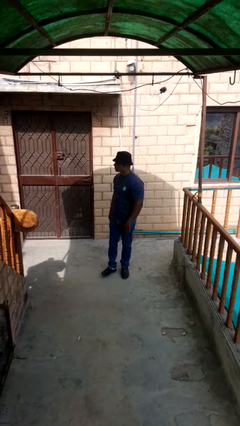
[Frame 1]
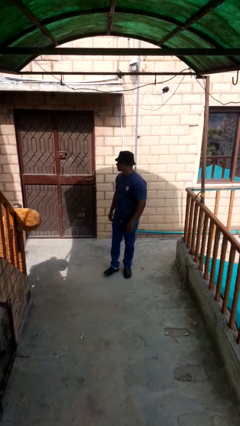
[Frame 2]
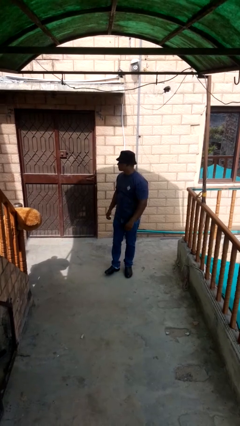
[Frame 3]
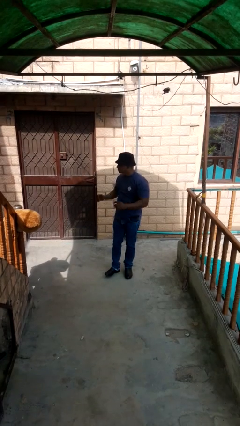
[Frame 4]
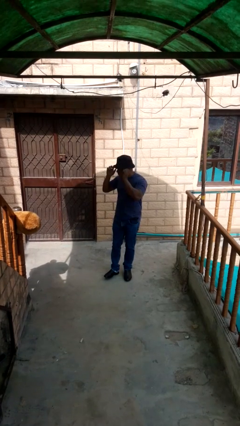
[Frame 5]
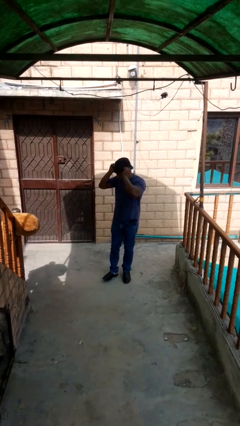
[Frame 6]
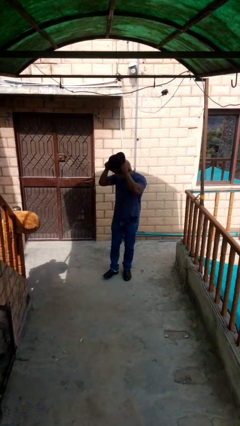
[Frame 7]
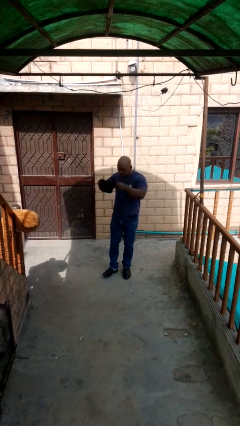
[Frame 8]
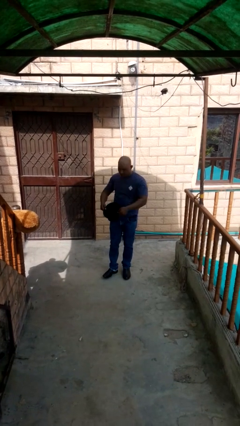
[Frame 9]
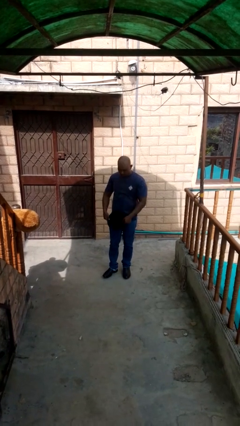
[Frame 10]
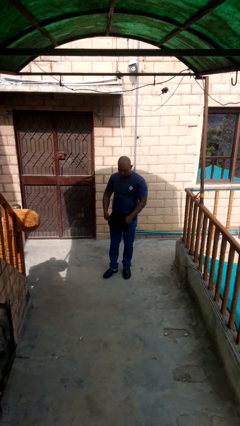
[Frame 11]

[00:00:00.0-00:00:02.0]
person takes off hat

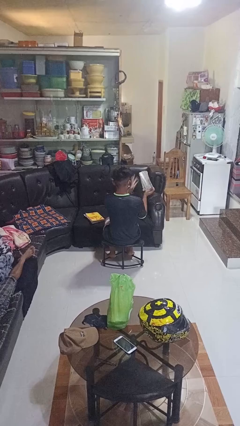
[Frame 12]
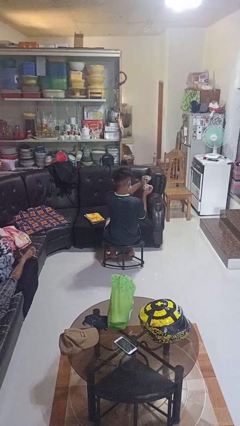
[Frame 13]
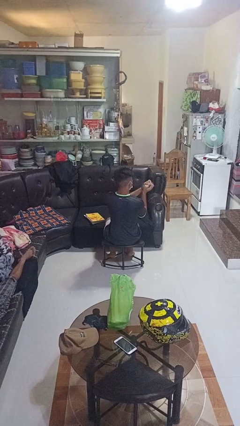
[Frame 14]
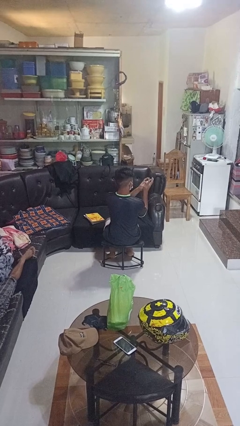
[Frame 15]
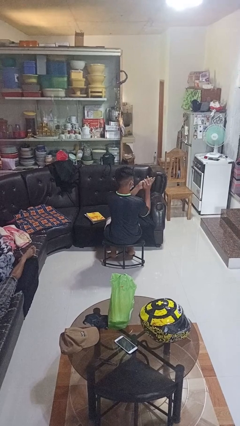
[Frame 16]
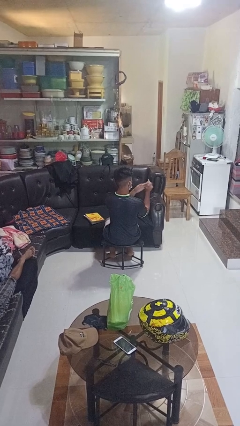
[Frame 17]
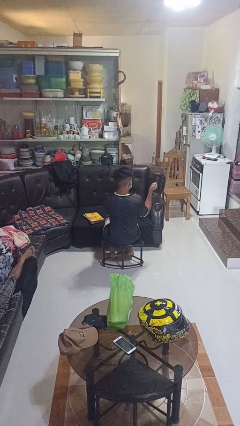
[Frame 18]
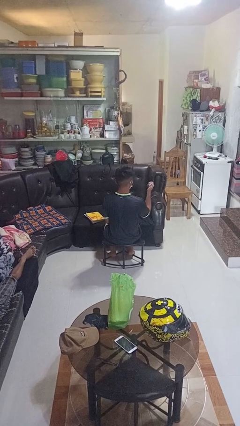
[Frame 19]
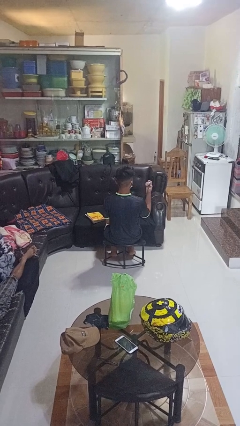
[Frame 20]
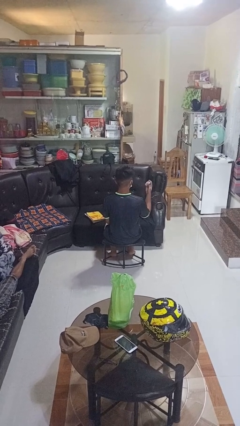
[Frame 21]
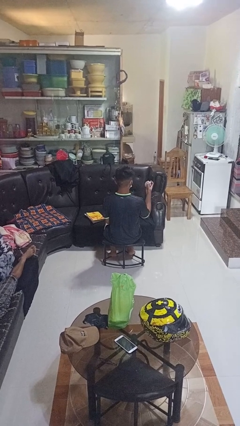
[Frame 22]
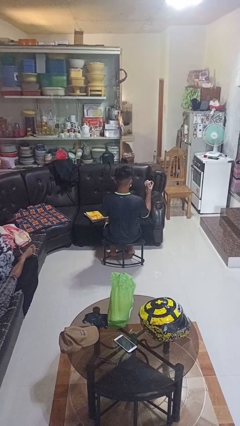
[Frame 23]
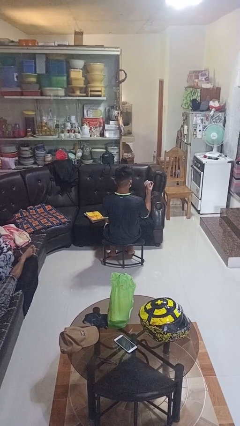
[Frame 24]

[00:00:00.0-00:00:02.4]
person crumples paper

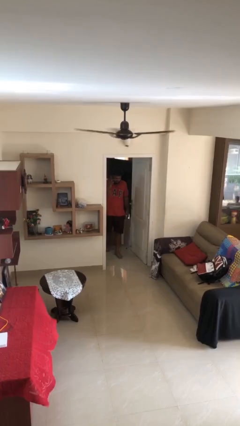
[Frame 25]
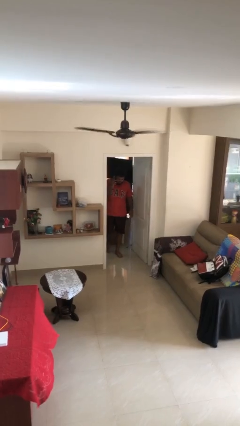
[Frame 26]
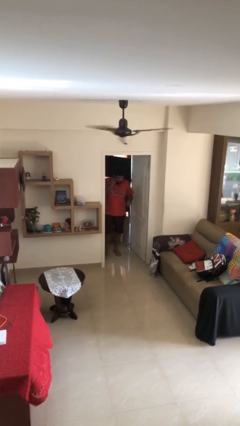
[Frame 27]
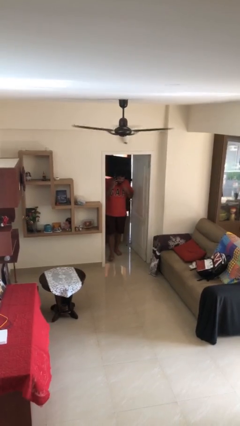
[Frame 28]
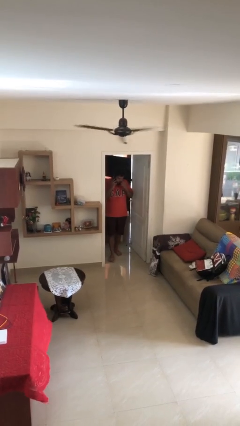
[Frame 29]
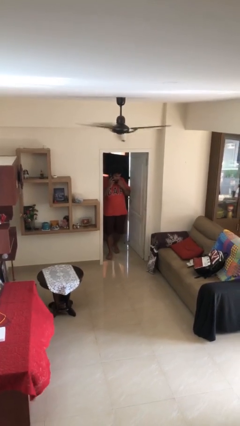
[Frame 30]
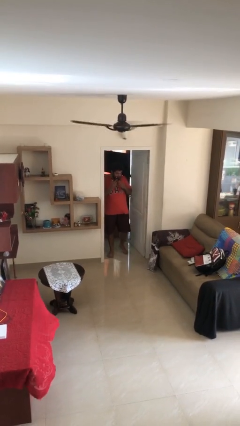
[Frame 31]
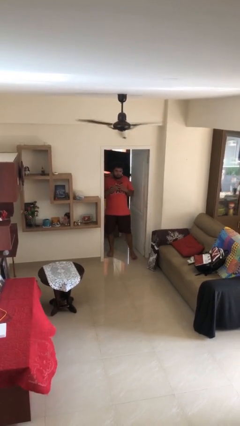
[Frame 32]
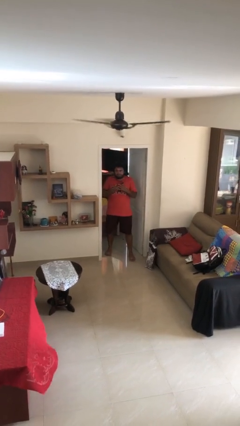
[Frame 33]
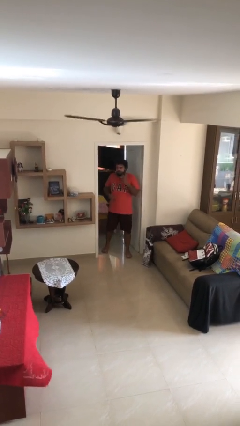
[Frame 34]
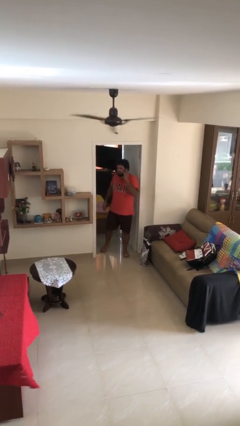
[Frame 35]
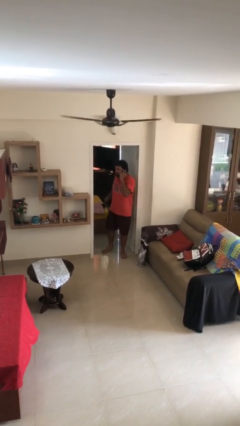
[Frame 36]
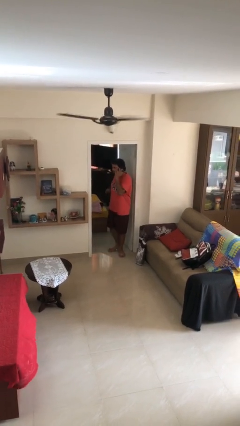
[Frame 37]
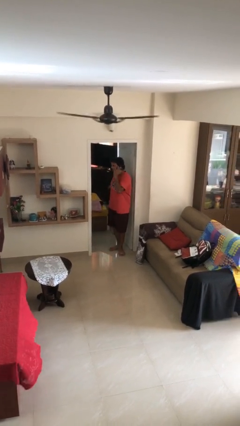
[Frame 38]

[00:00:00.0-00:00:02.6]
person enters scene through structure

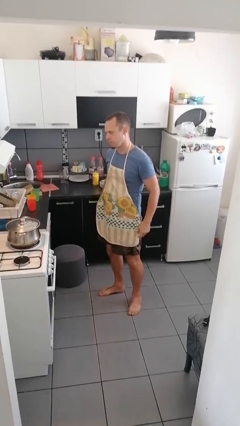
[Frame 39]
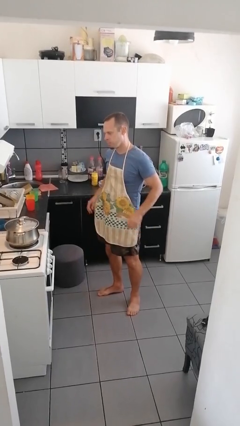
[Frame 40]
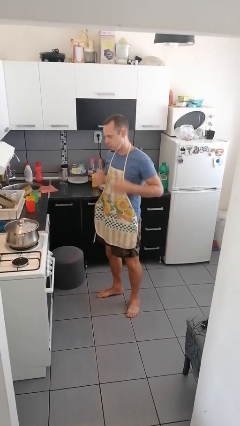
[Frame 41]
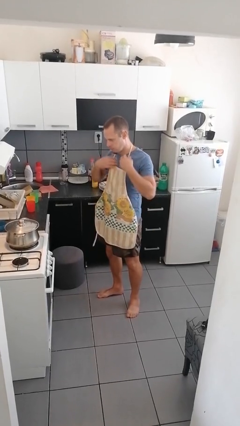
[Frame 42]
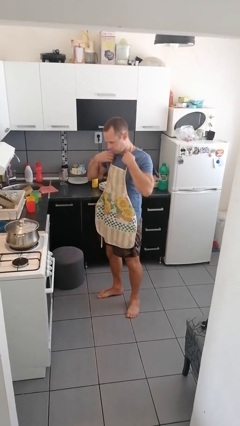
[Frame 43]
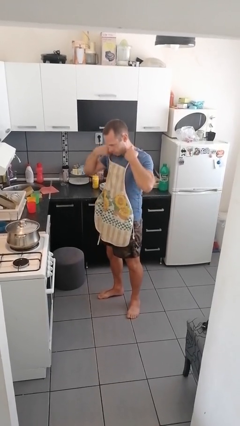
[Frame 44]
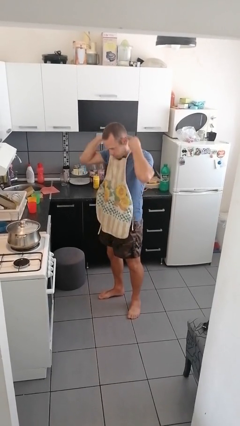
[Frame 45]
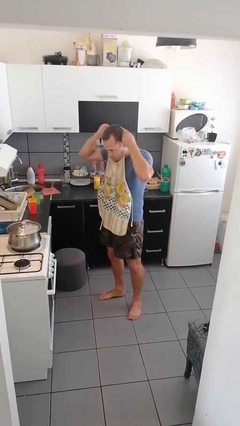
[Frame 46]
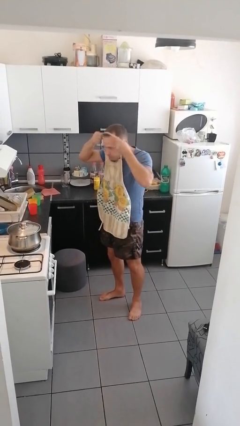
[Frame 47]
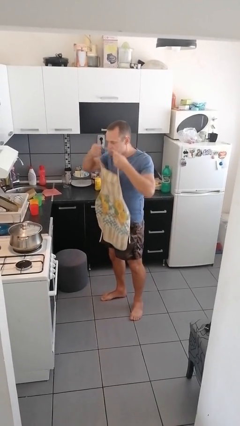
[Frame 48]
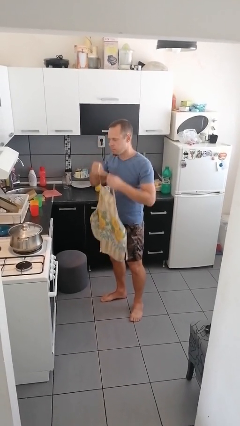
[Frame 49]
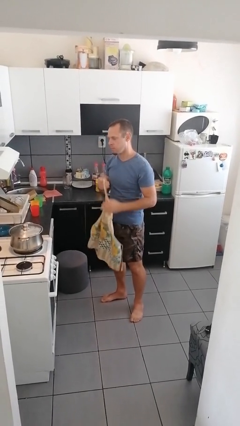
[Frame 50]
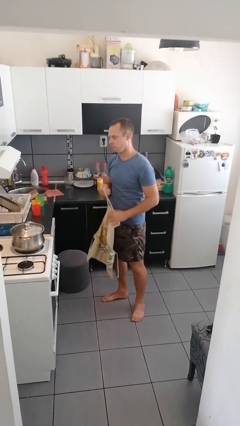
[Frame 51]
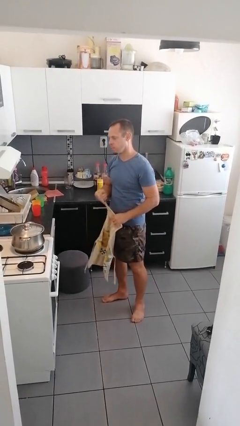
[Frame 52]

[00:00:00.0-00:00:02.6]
person takes off apron

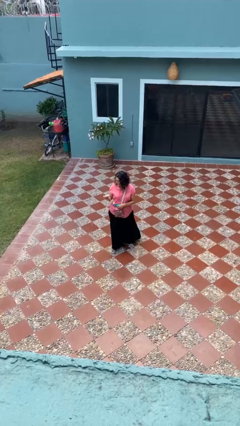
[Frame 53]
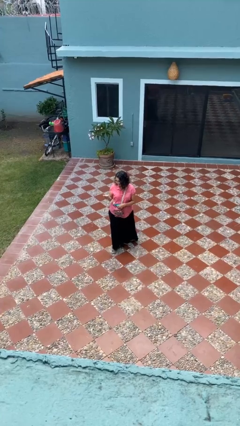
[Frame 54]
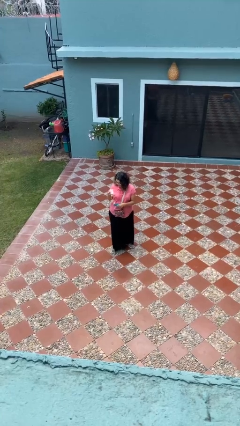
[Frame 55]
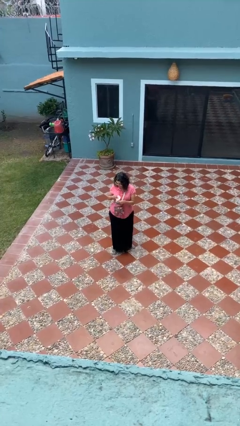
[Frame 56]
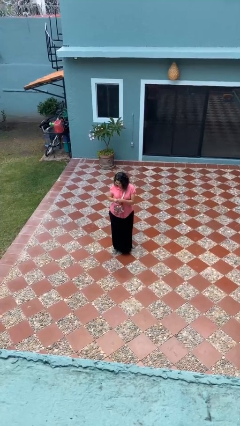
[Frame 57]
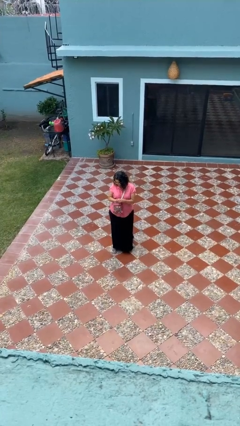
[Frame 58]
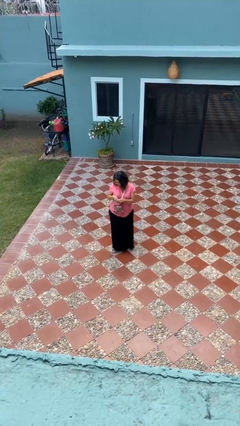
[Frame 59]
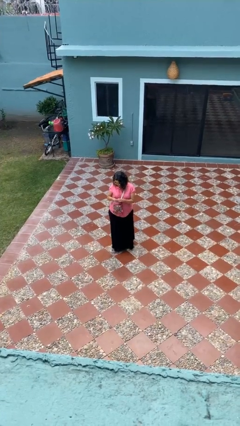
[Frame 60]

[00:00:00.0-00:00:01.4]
person puts object into purse

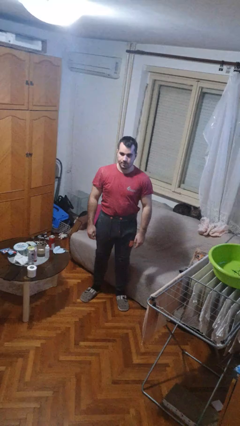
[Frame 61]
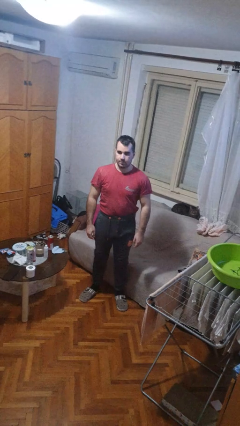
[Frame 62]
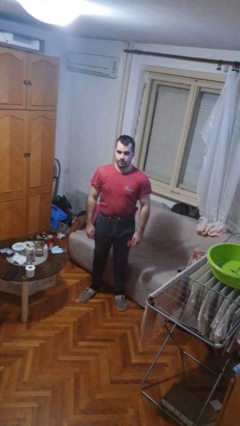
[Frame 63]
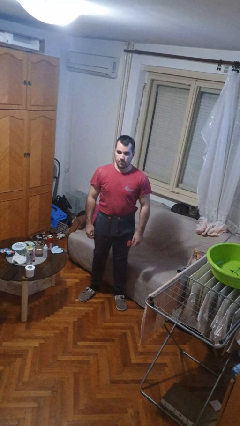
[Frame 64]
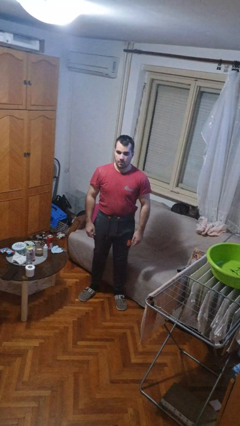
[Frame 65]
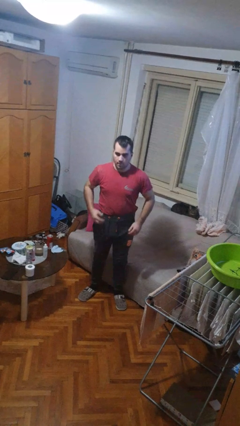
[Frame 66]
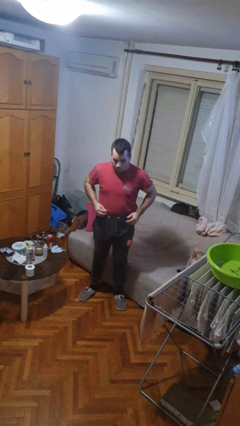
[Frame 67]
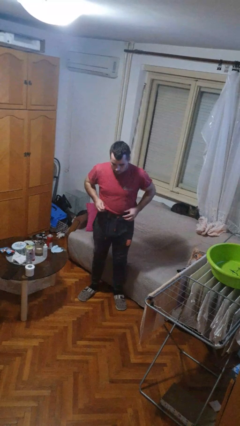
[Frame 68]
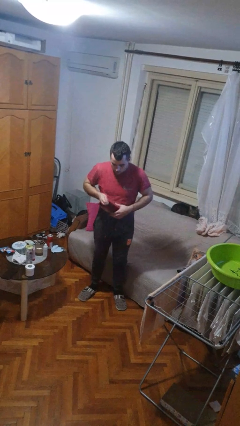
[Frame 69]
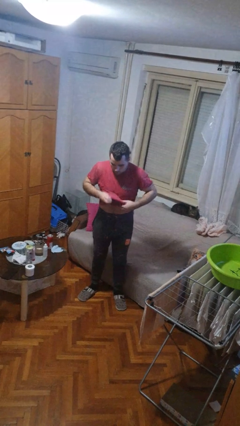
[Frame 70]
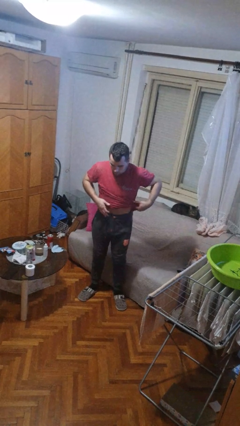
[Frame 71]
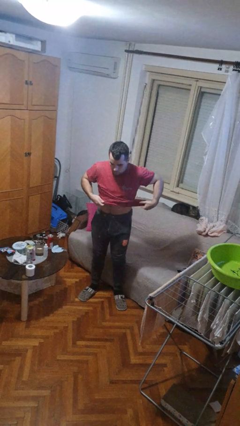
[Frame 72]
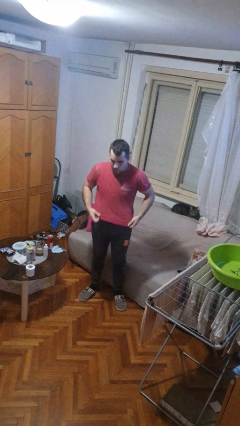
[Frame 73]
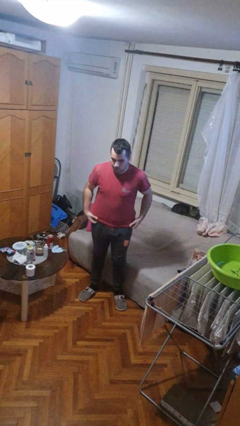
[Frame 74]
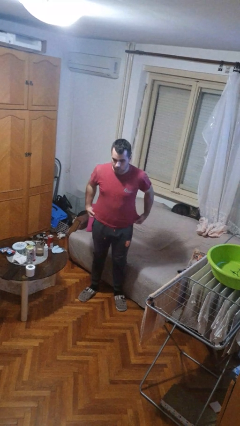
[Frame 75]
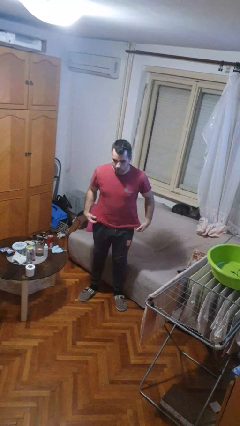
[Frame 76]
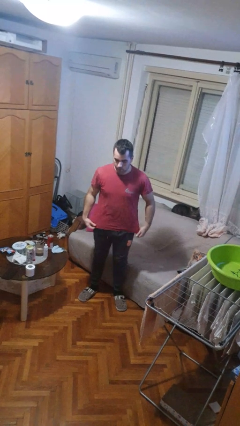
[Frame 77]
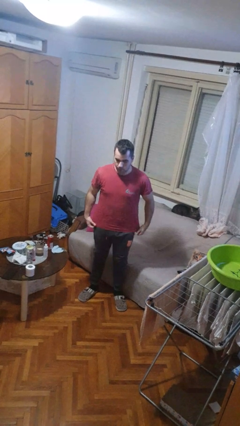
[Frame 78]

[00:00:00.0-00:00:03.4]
person untucks shirt

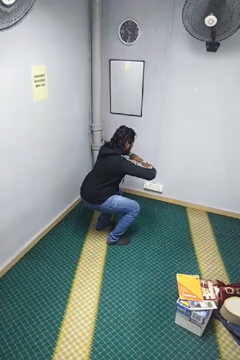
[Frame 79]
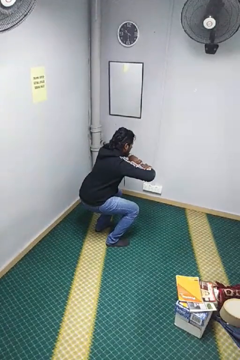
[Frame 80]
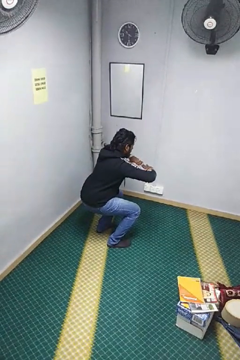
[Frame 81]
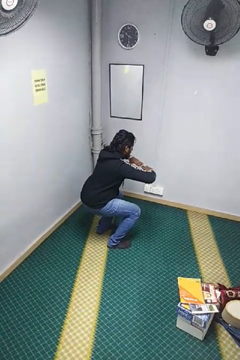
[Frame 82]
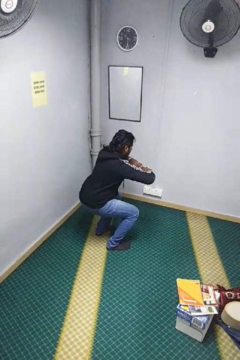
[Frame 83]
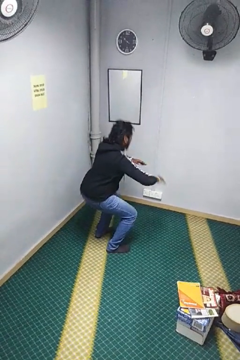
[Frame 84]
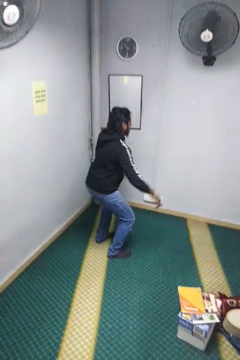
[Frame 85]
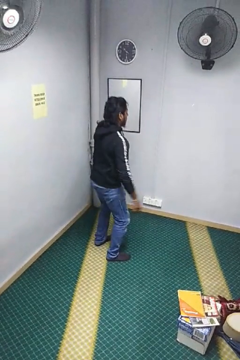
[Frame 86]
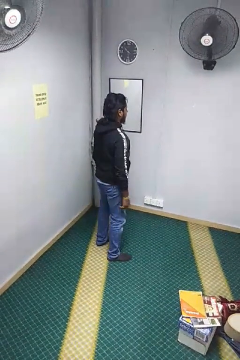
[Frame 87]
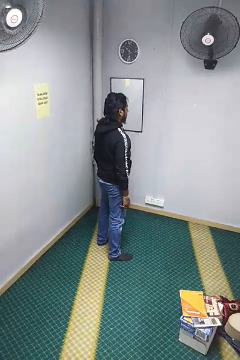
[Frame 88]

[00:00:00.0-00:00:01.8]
person stands up

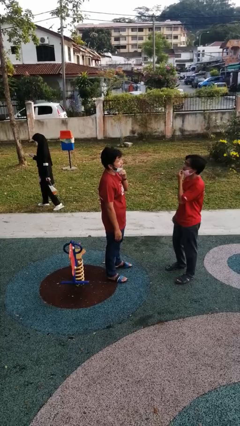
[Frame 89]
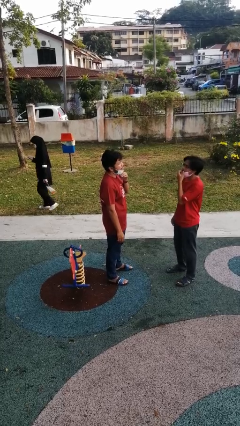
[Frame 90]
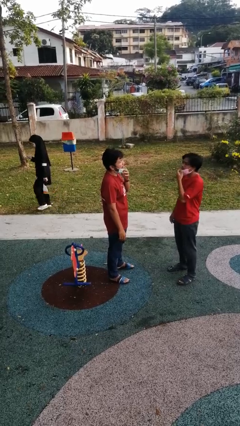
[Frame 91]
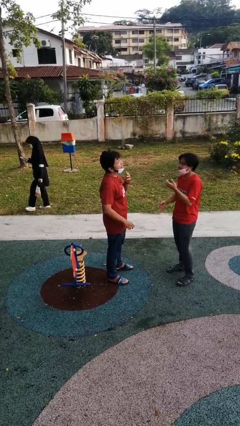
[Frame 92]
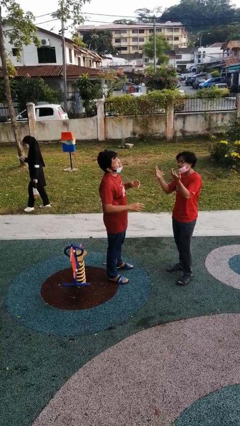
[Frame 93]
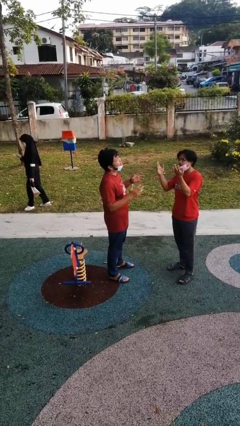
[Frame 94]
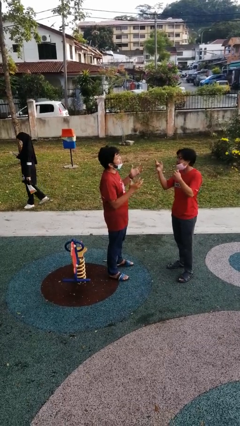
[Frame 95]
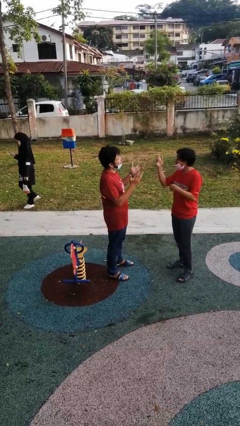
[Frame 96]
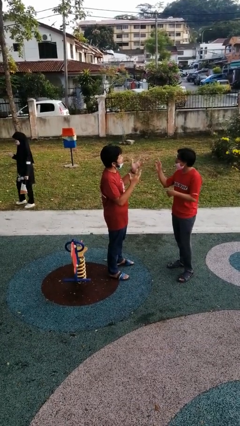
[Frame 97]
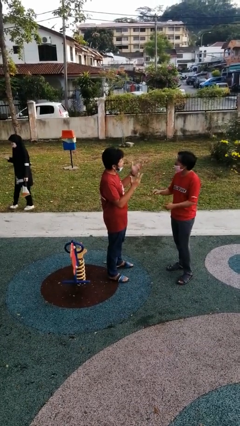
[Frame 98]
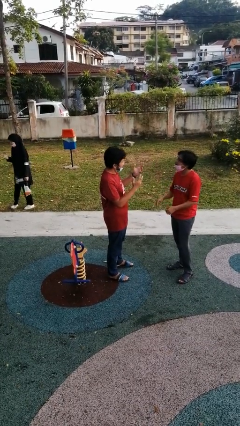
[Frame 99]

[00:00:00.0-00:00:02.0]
person talks to person
